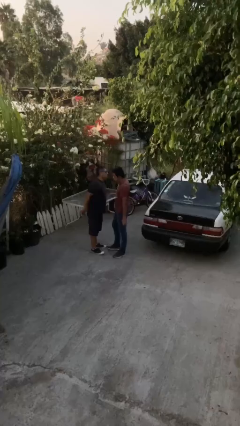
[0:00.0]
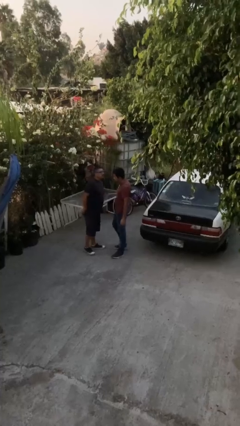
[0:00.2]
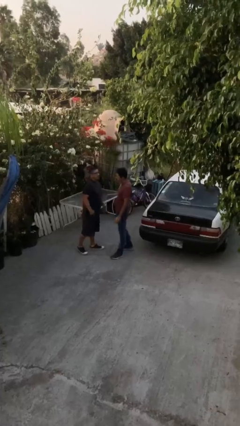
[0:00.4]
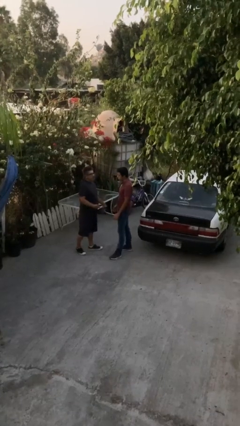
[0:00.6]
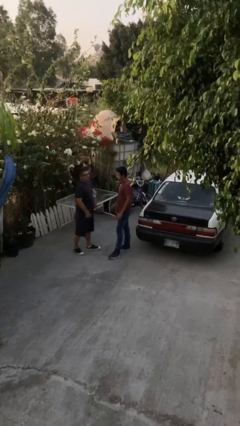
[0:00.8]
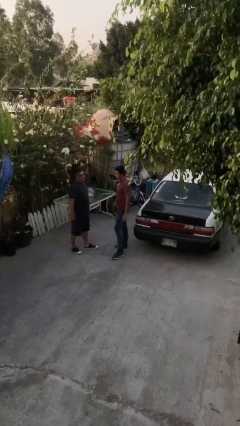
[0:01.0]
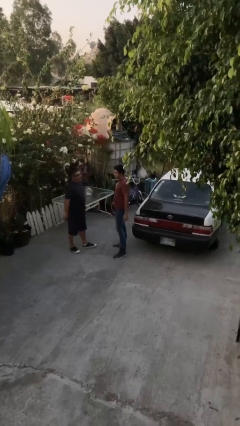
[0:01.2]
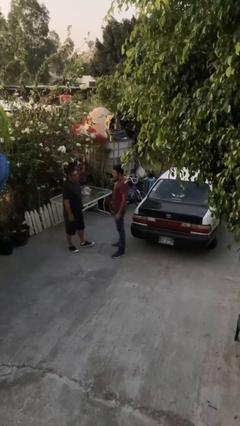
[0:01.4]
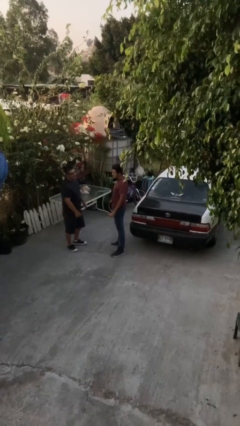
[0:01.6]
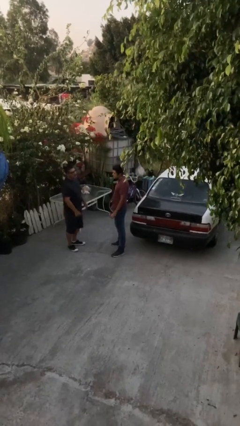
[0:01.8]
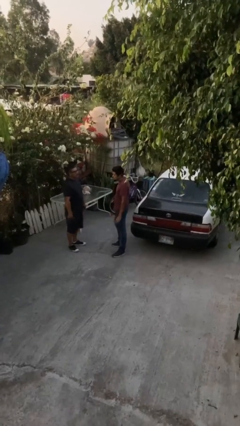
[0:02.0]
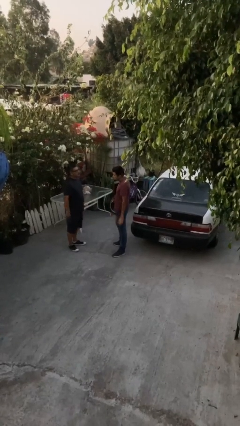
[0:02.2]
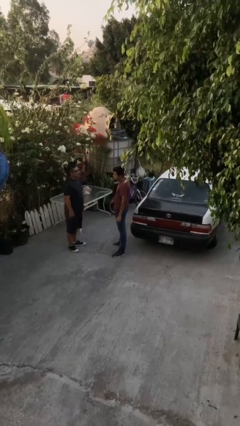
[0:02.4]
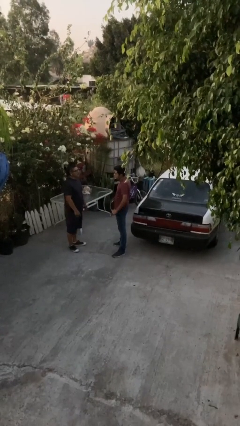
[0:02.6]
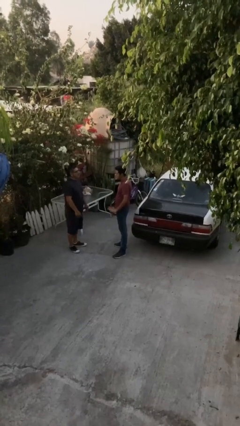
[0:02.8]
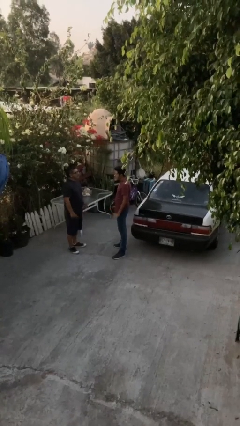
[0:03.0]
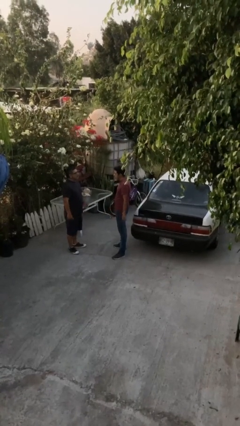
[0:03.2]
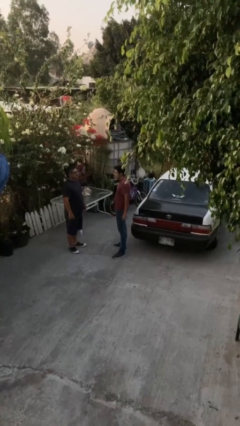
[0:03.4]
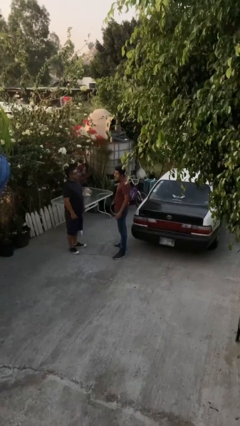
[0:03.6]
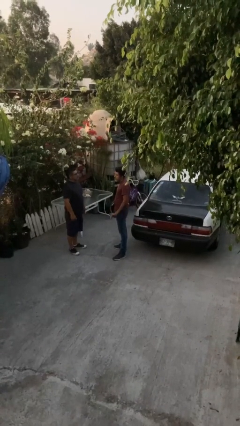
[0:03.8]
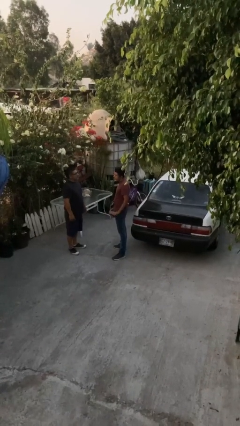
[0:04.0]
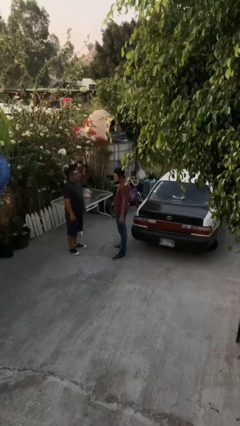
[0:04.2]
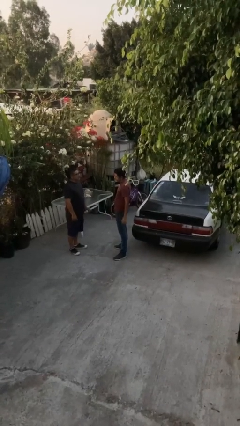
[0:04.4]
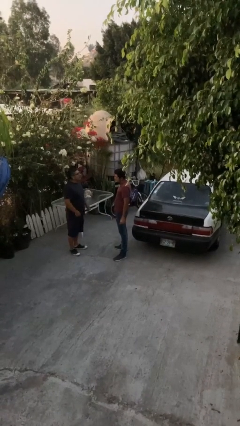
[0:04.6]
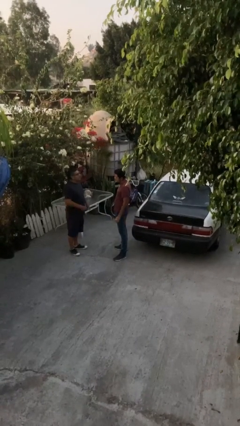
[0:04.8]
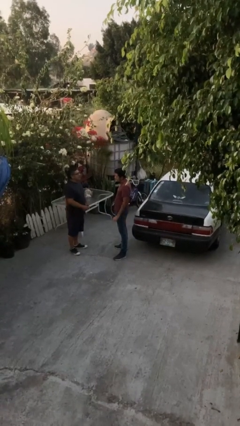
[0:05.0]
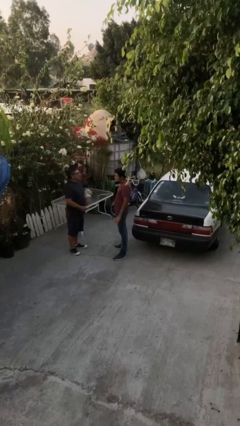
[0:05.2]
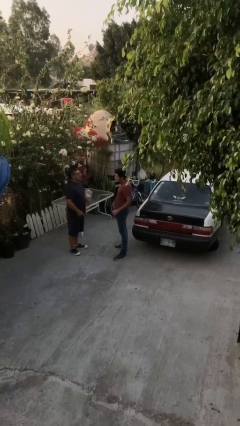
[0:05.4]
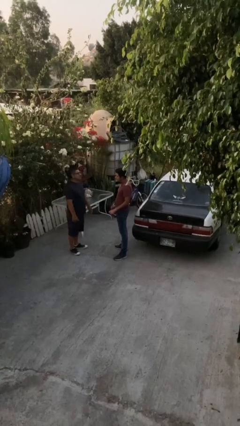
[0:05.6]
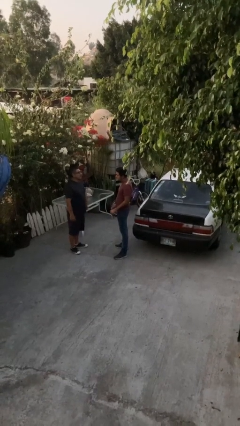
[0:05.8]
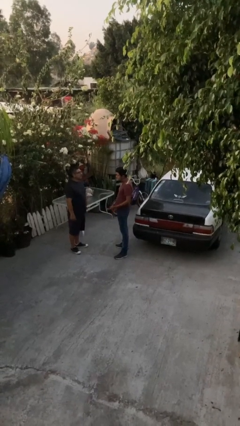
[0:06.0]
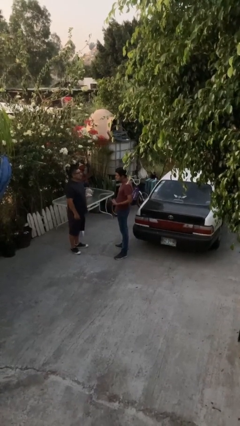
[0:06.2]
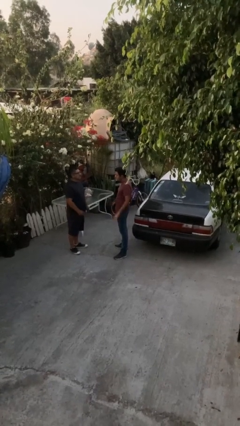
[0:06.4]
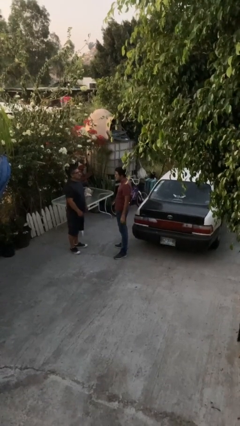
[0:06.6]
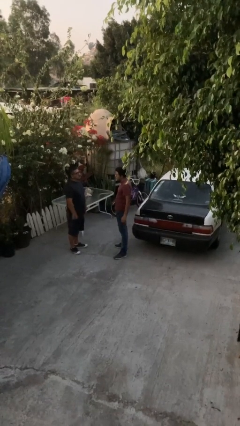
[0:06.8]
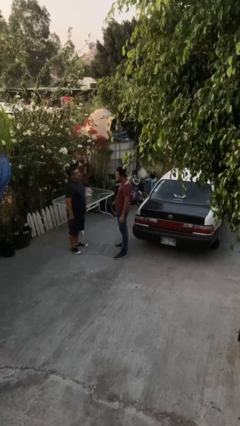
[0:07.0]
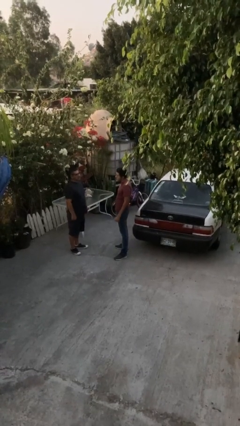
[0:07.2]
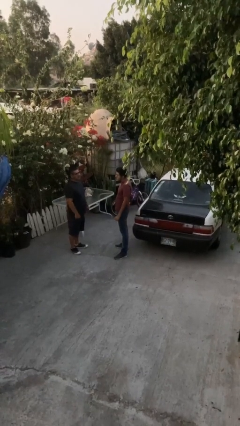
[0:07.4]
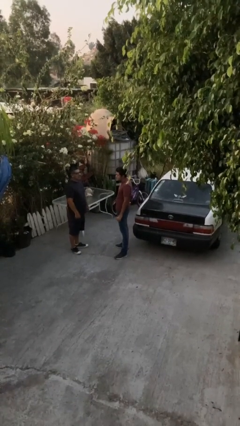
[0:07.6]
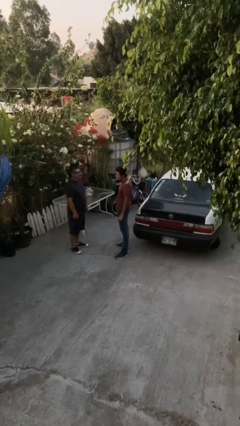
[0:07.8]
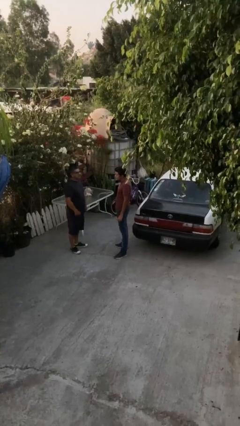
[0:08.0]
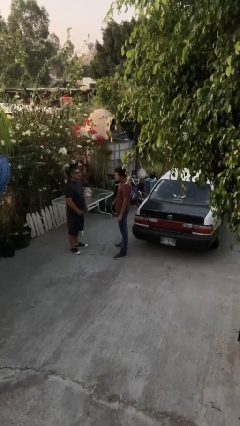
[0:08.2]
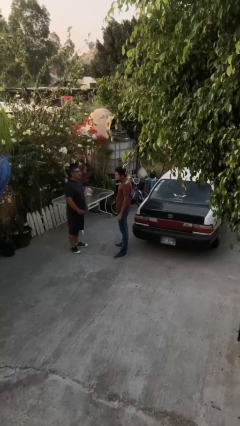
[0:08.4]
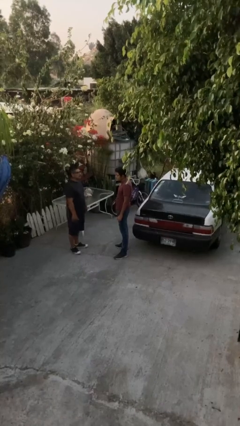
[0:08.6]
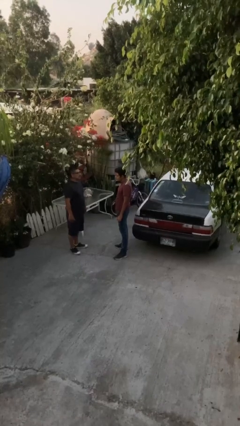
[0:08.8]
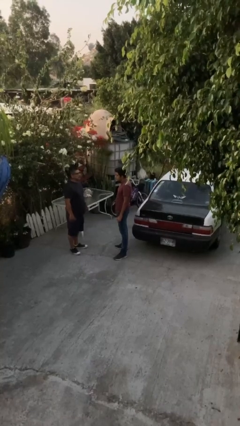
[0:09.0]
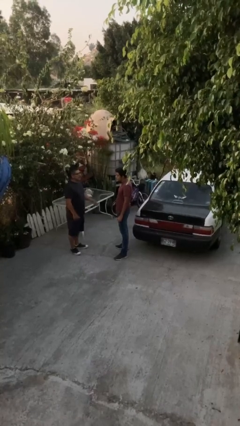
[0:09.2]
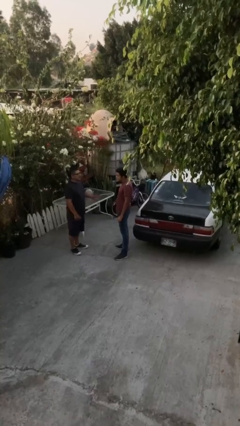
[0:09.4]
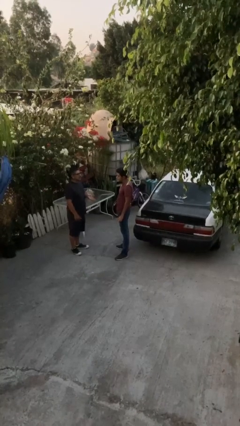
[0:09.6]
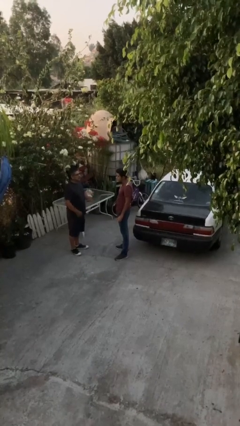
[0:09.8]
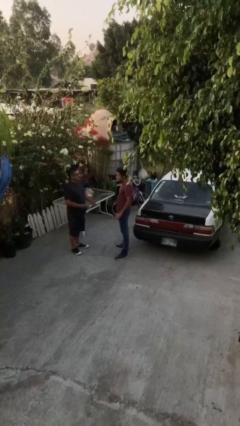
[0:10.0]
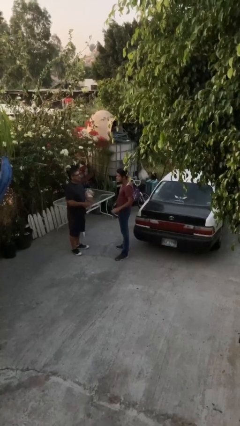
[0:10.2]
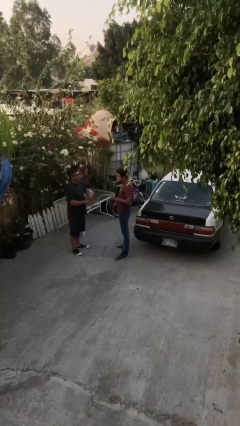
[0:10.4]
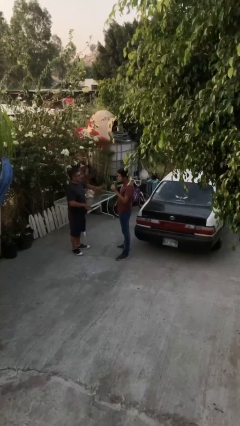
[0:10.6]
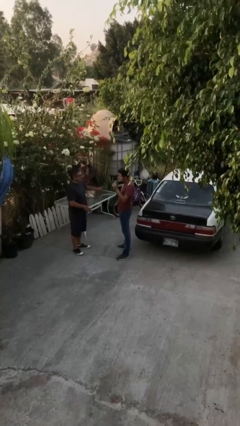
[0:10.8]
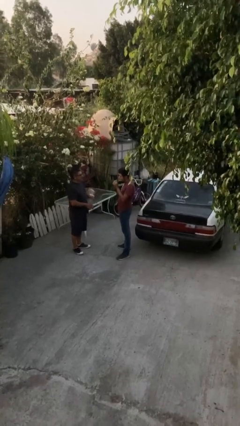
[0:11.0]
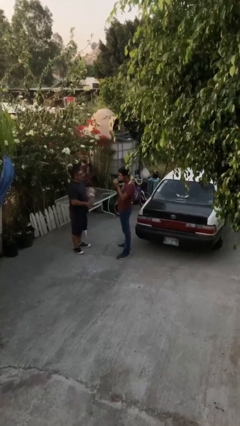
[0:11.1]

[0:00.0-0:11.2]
person talks to person

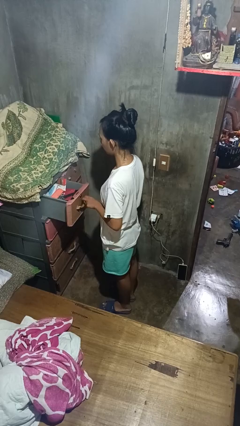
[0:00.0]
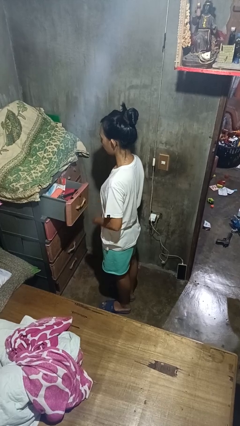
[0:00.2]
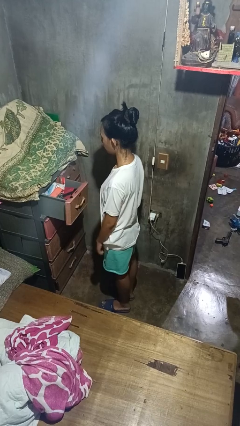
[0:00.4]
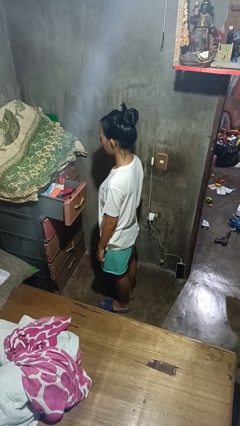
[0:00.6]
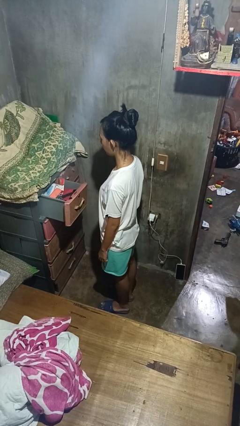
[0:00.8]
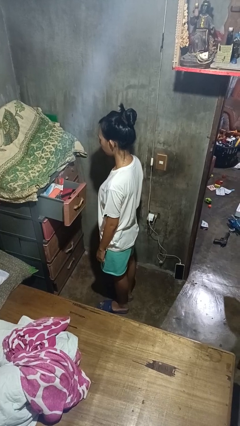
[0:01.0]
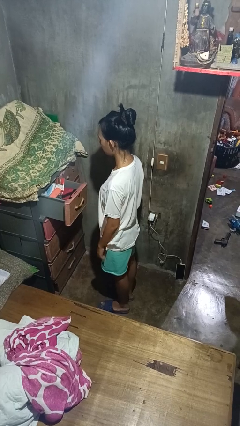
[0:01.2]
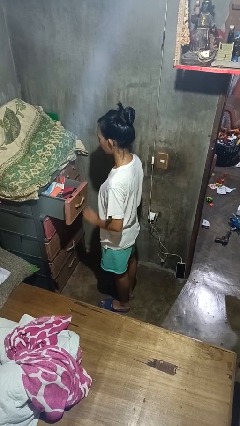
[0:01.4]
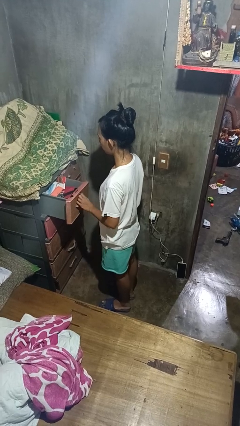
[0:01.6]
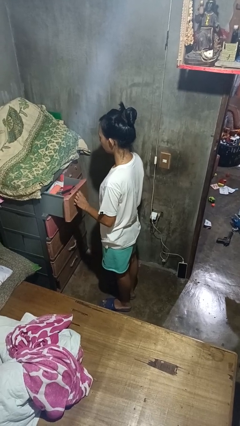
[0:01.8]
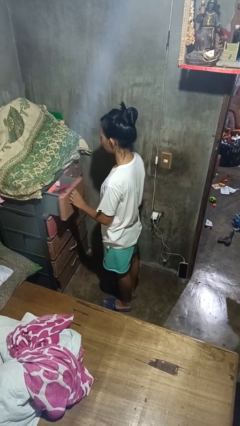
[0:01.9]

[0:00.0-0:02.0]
person opens dresser drawer

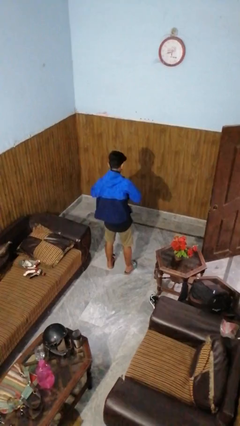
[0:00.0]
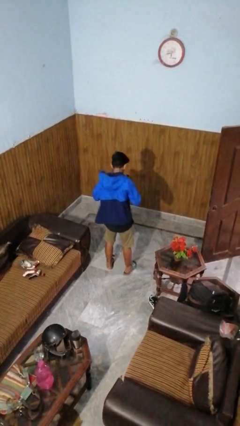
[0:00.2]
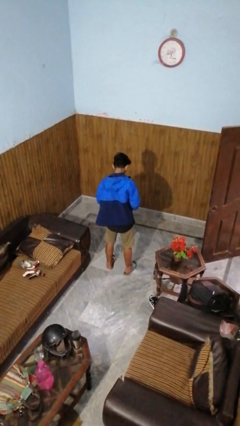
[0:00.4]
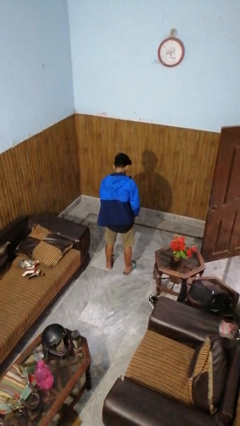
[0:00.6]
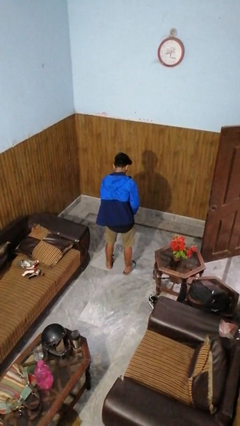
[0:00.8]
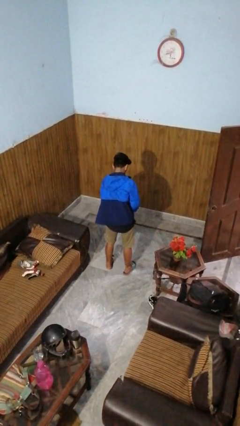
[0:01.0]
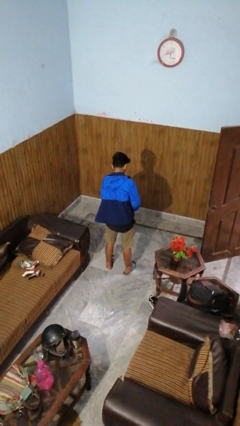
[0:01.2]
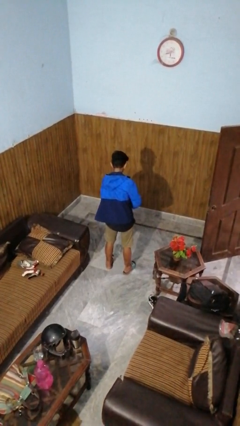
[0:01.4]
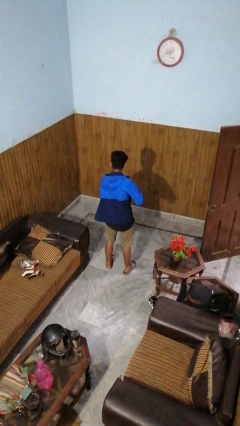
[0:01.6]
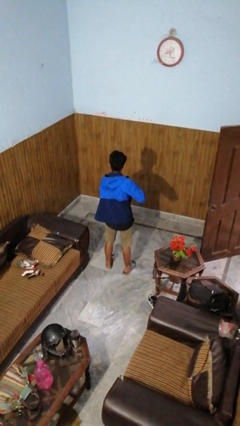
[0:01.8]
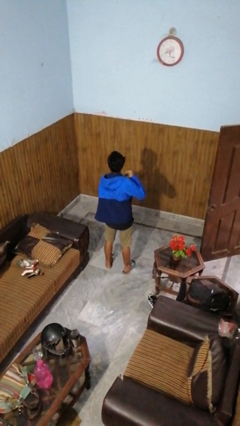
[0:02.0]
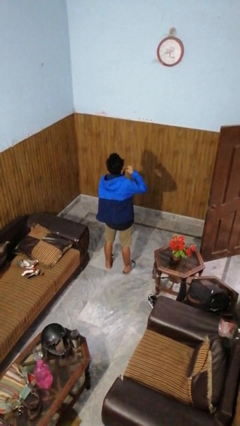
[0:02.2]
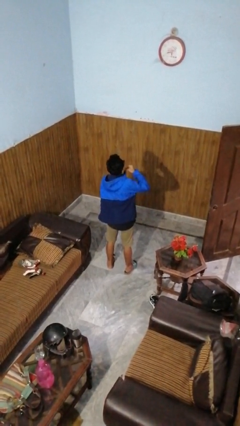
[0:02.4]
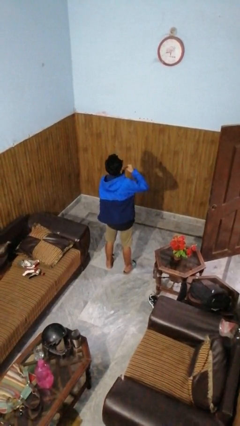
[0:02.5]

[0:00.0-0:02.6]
person zips up jacket

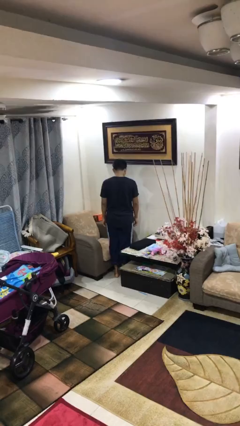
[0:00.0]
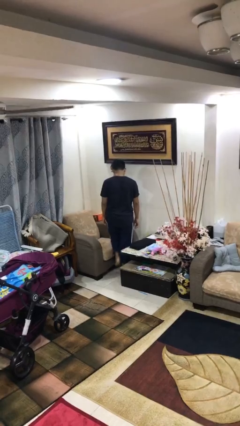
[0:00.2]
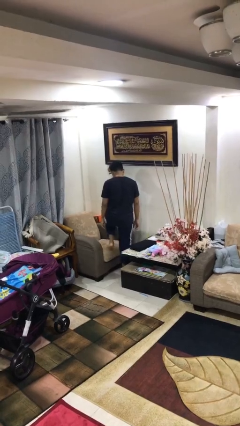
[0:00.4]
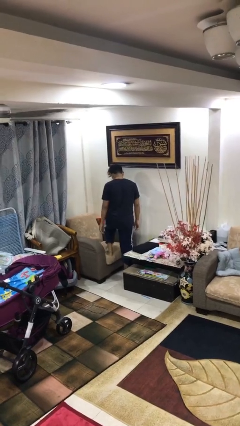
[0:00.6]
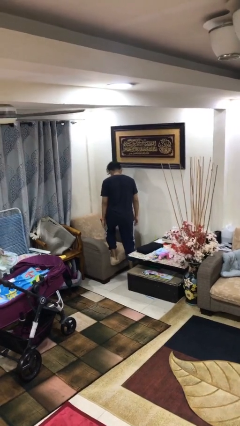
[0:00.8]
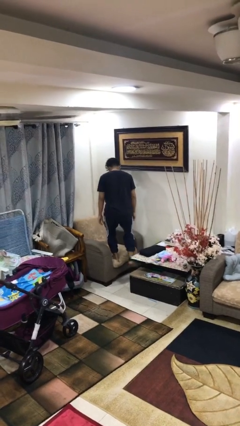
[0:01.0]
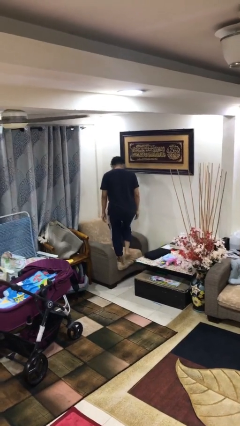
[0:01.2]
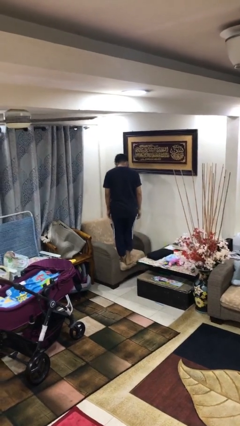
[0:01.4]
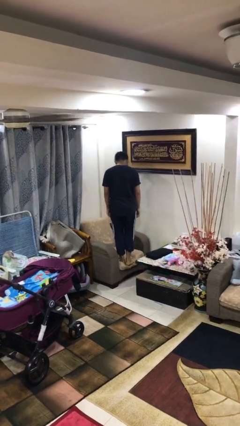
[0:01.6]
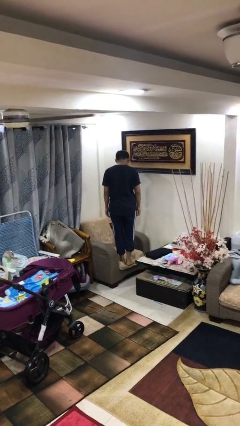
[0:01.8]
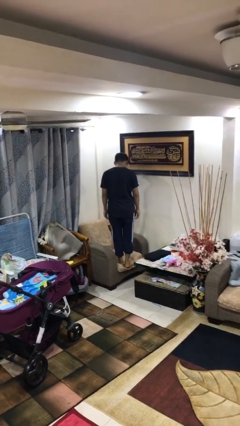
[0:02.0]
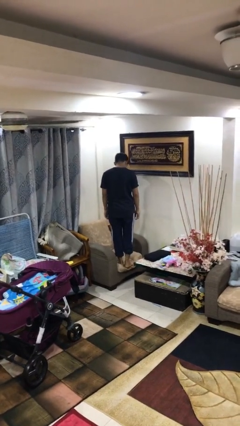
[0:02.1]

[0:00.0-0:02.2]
person climbs on couch
